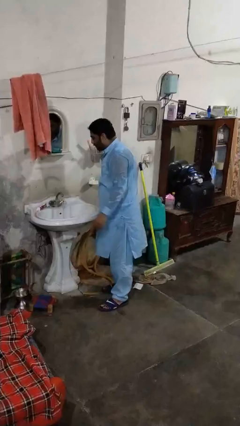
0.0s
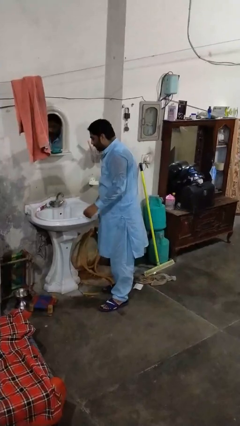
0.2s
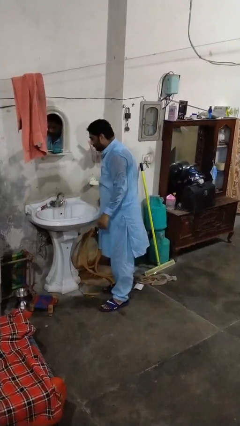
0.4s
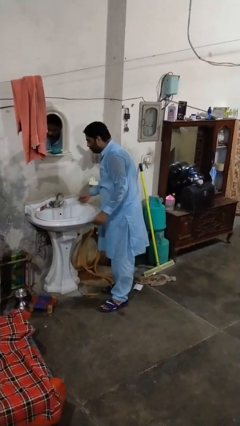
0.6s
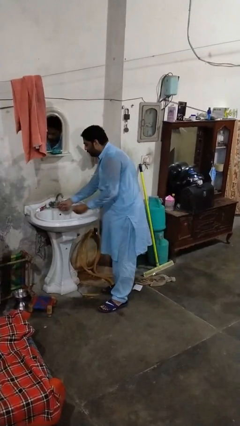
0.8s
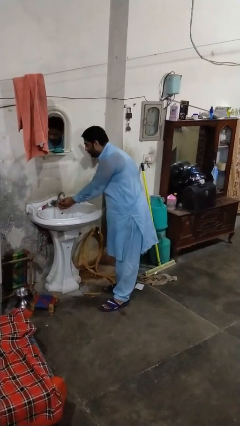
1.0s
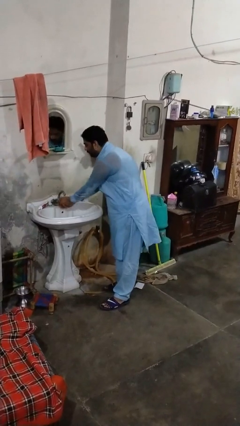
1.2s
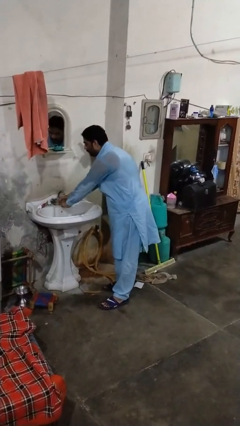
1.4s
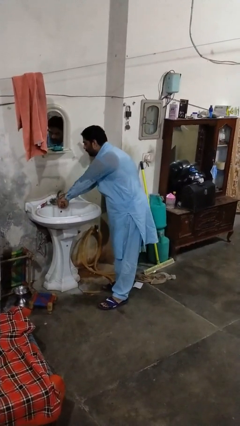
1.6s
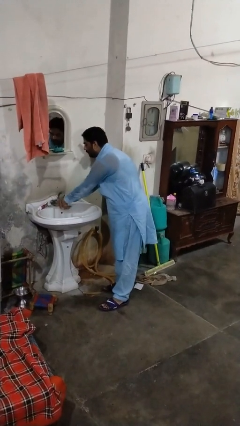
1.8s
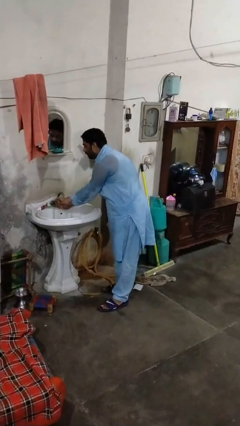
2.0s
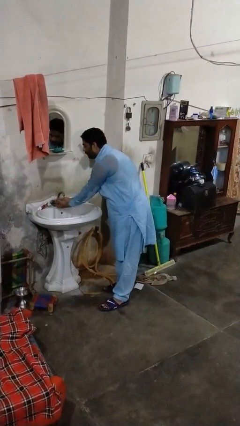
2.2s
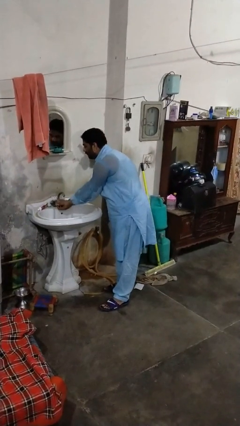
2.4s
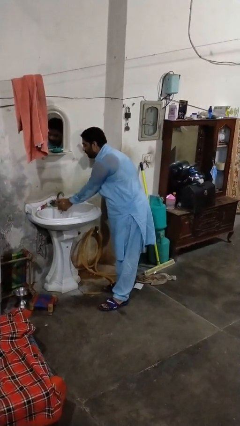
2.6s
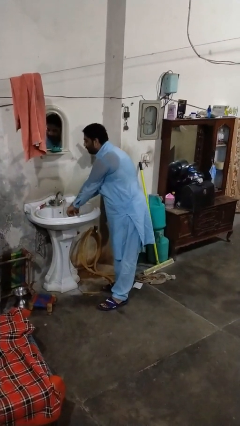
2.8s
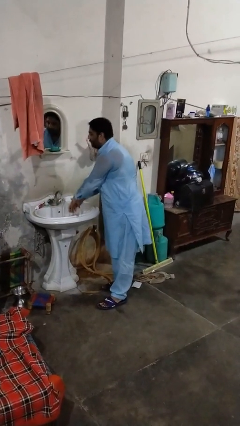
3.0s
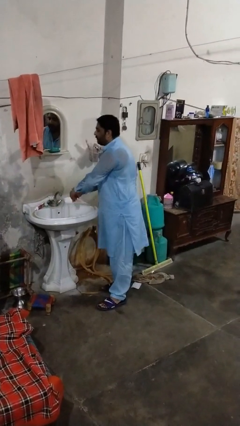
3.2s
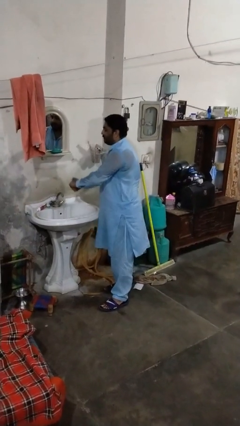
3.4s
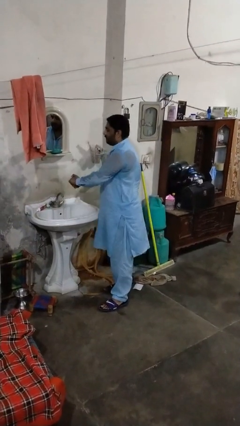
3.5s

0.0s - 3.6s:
person washes hands

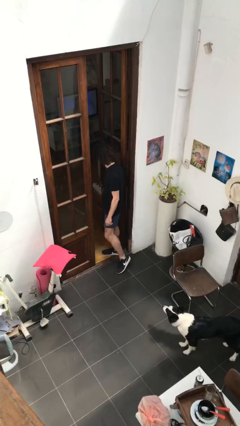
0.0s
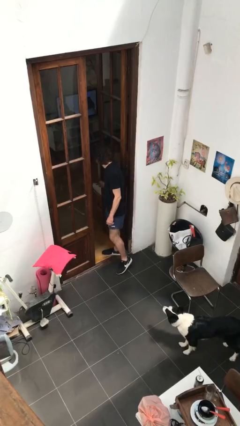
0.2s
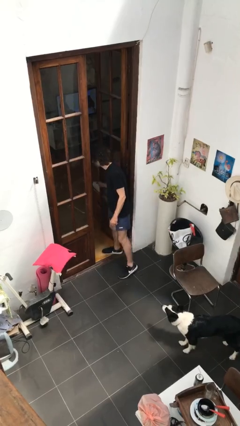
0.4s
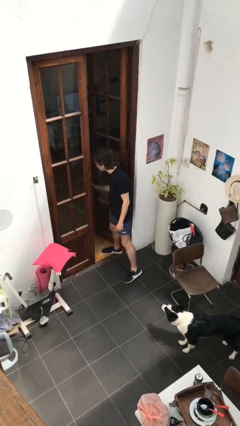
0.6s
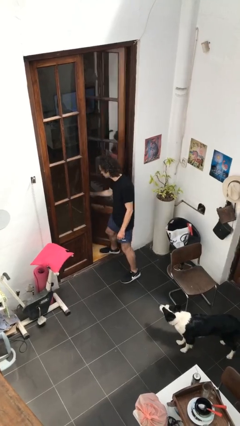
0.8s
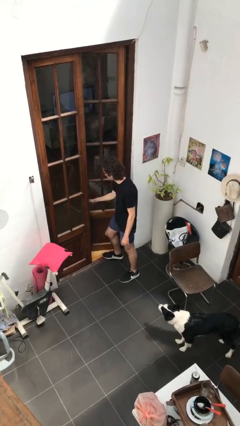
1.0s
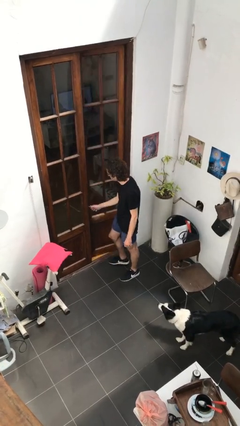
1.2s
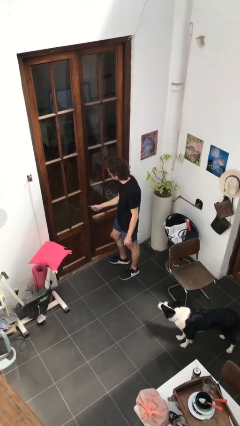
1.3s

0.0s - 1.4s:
person closes facility door

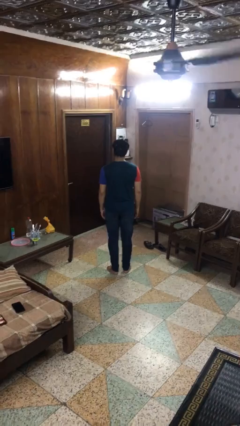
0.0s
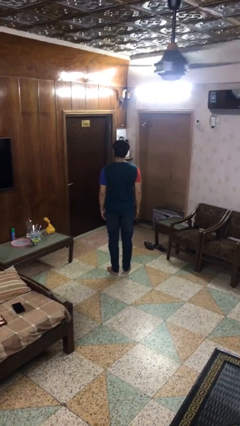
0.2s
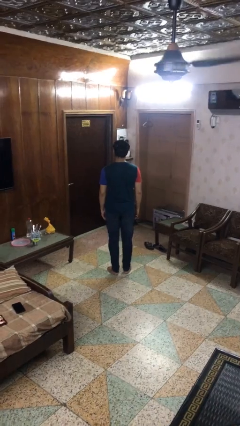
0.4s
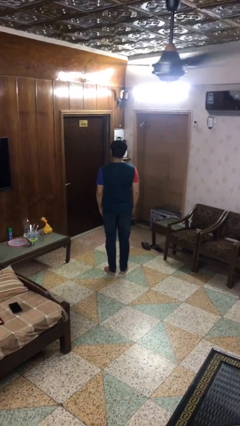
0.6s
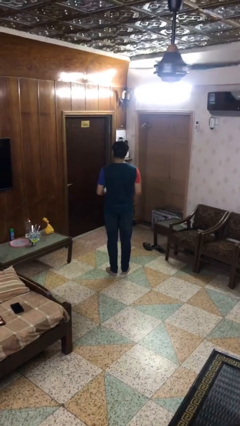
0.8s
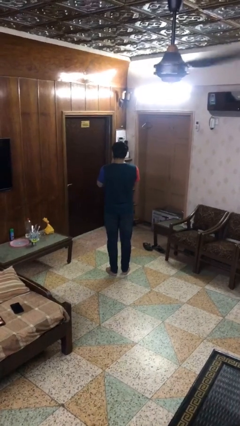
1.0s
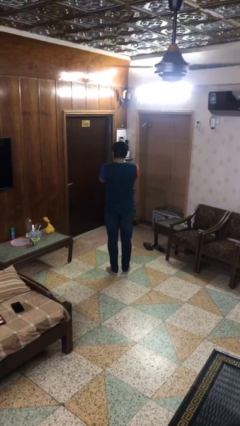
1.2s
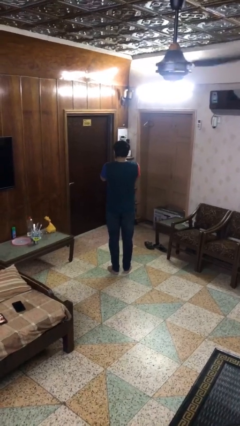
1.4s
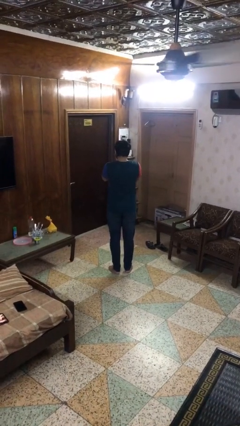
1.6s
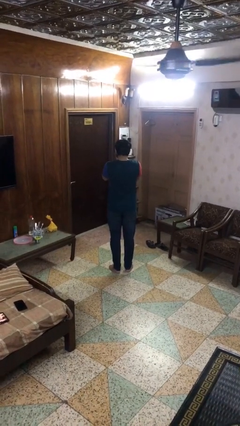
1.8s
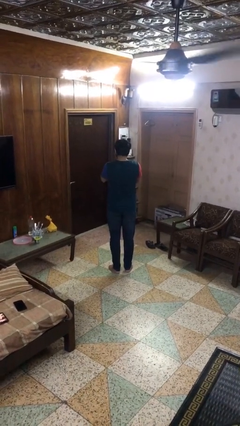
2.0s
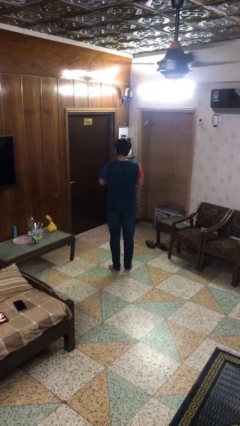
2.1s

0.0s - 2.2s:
person sneezes into hand

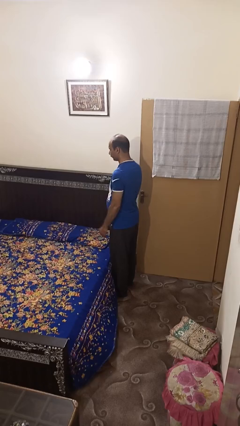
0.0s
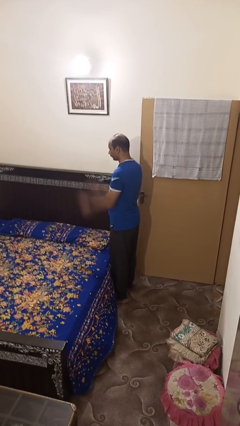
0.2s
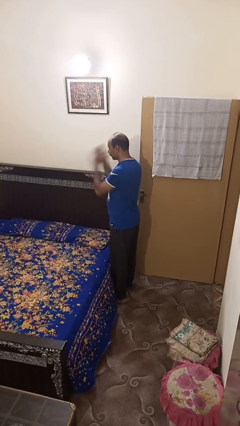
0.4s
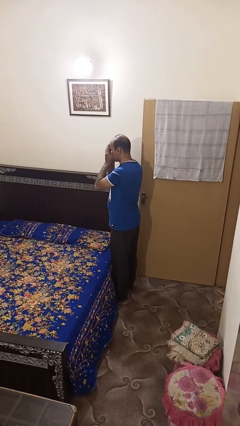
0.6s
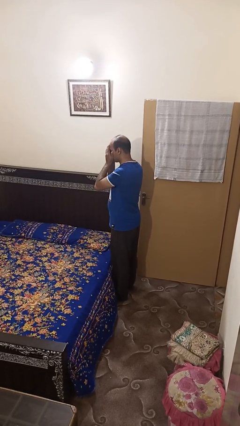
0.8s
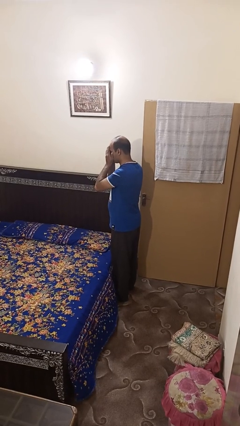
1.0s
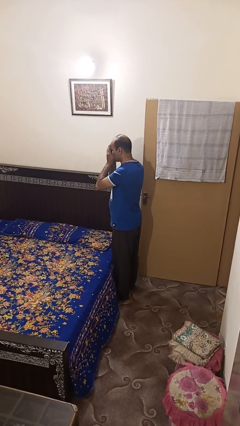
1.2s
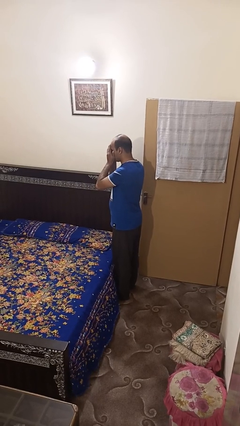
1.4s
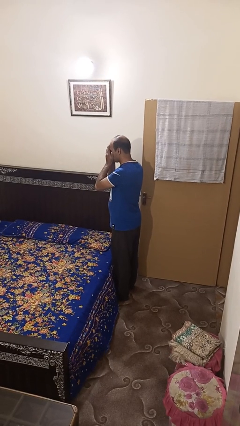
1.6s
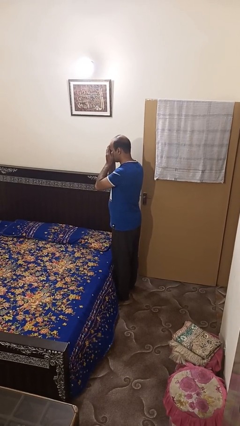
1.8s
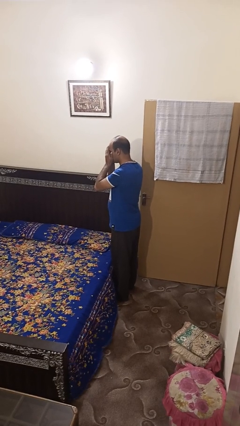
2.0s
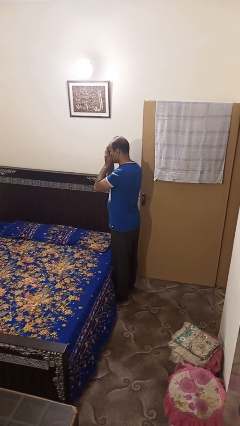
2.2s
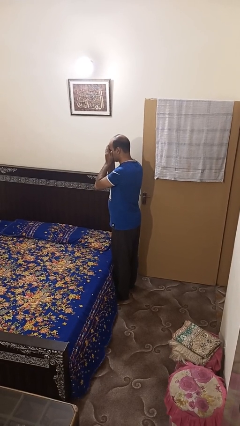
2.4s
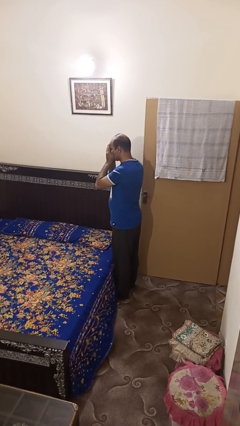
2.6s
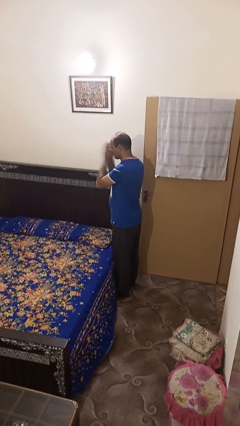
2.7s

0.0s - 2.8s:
person covers face with hands

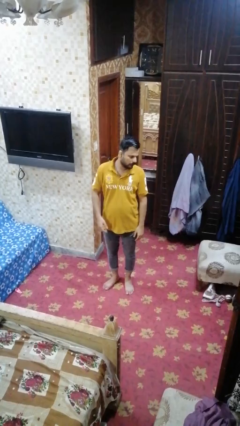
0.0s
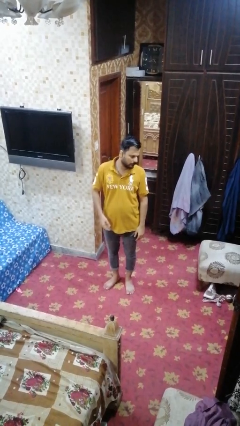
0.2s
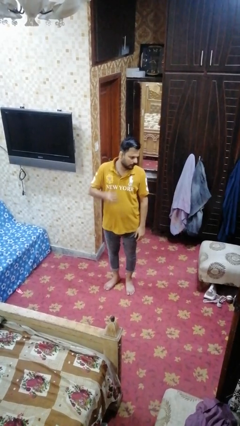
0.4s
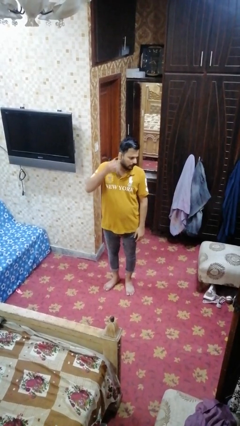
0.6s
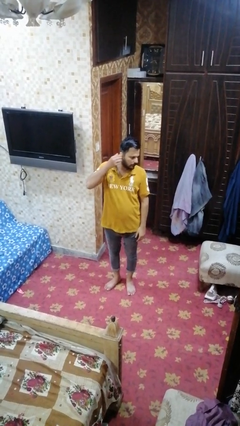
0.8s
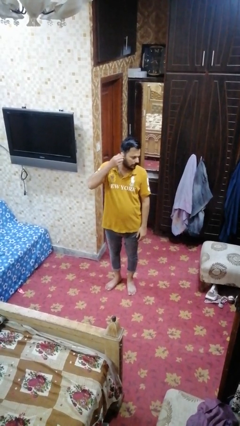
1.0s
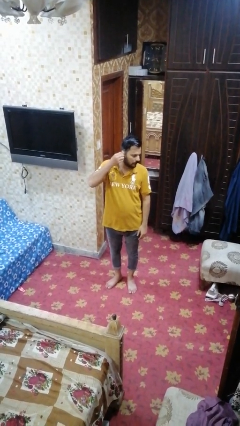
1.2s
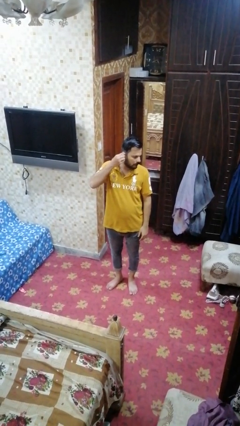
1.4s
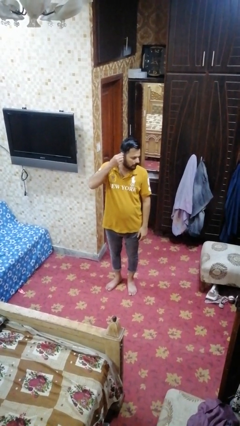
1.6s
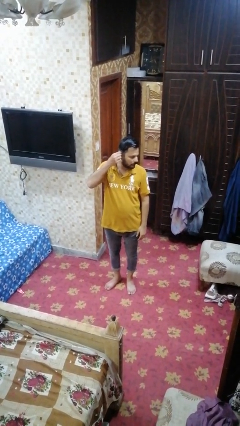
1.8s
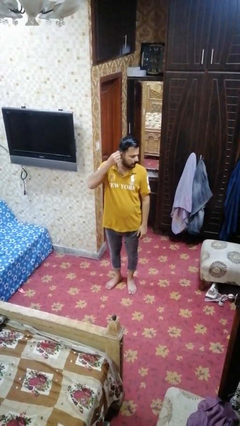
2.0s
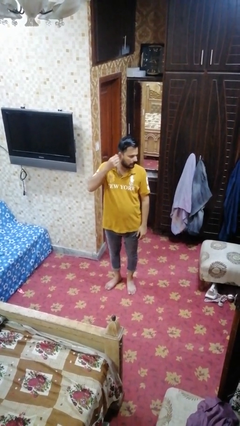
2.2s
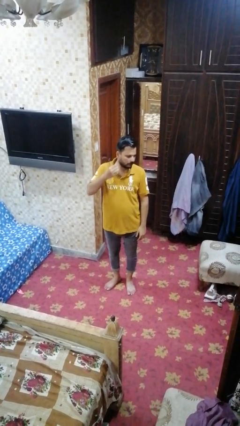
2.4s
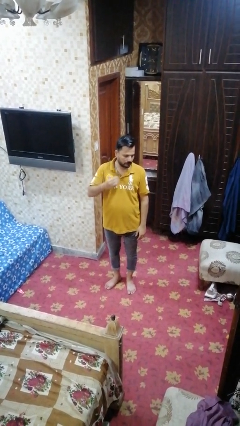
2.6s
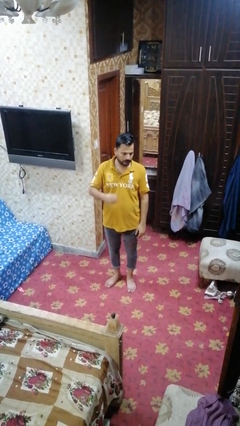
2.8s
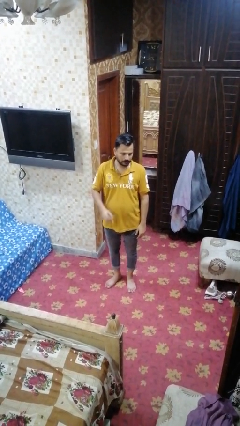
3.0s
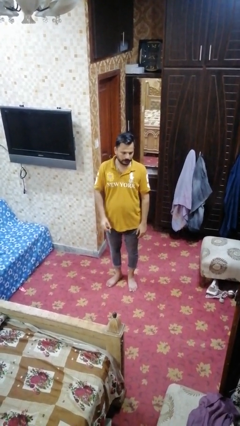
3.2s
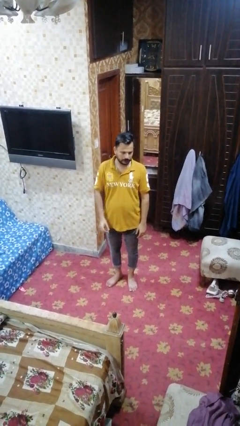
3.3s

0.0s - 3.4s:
person takes off earrings

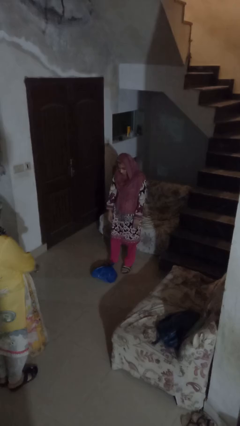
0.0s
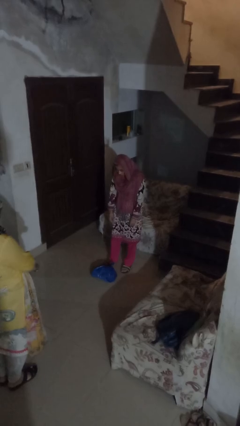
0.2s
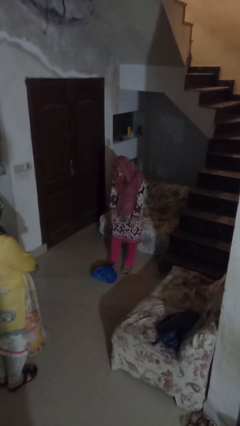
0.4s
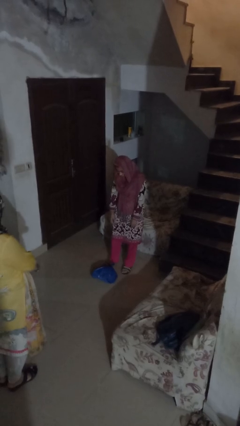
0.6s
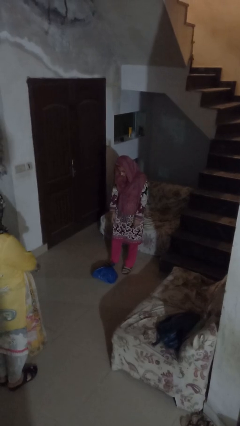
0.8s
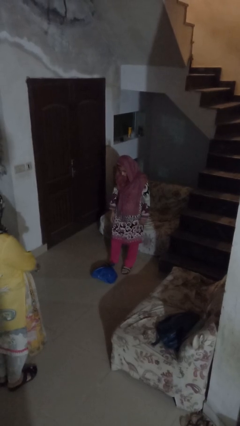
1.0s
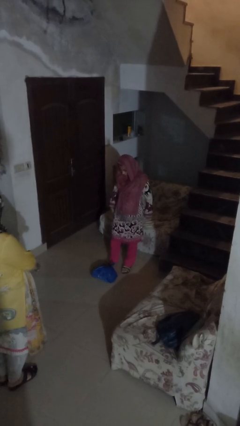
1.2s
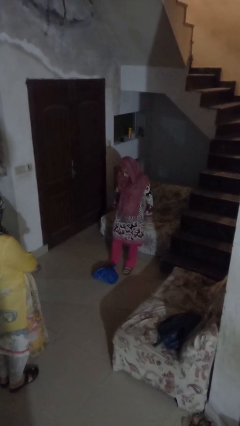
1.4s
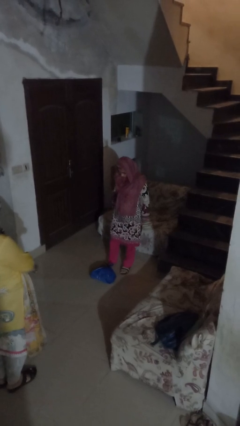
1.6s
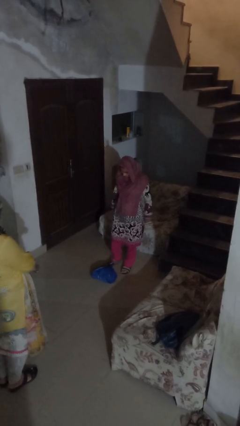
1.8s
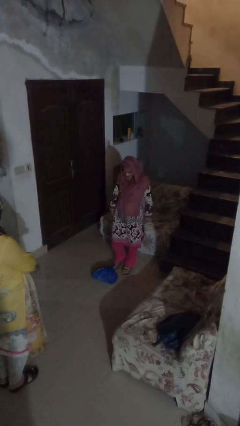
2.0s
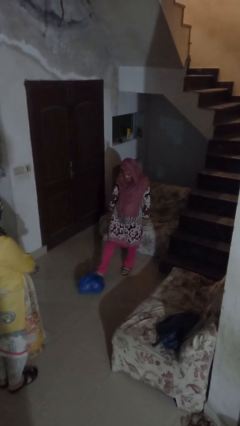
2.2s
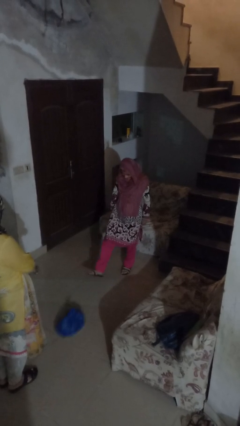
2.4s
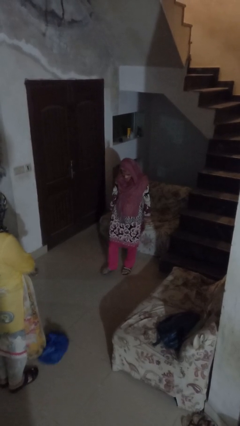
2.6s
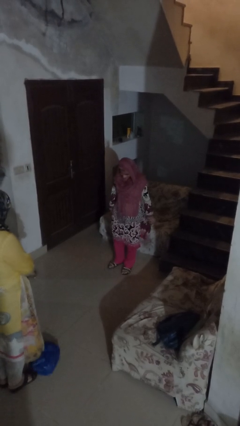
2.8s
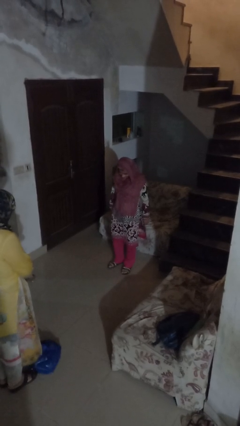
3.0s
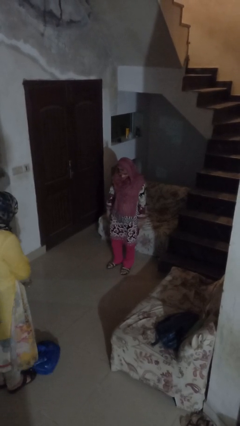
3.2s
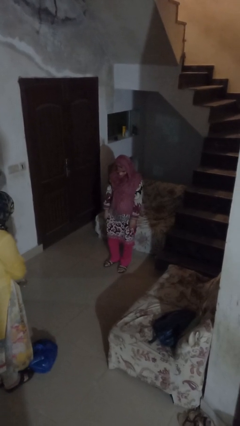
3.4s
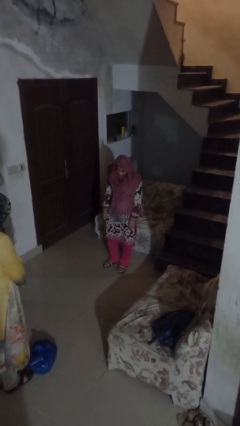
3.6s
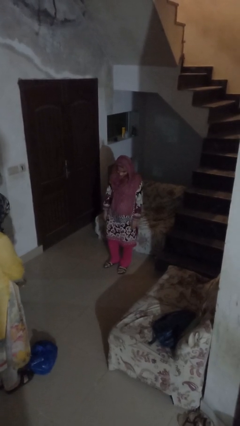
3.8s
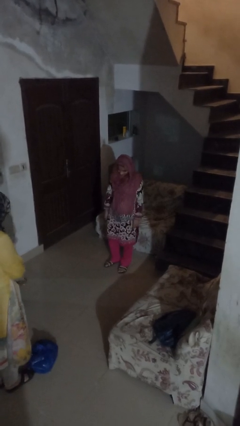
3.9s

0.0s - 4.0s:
person kicks object to person

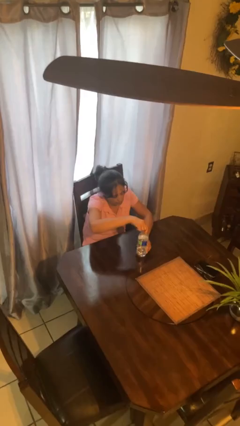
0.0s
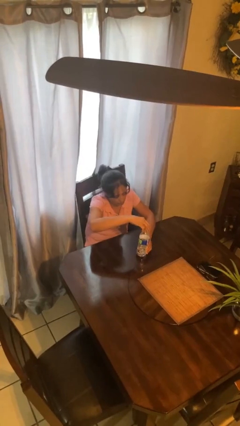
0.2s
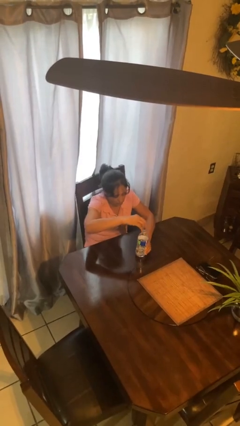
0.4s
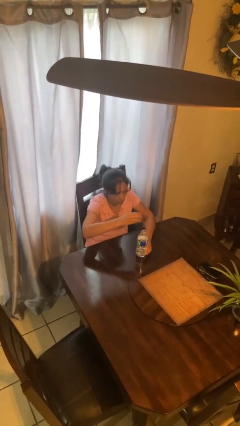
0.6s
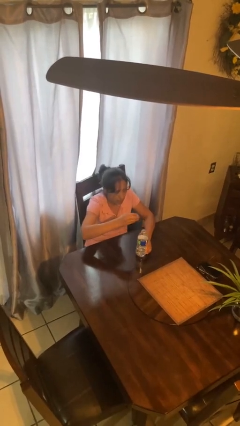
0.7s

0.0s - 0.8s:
person unscrews lid from bottle
